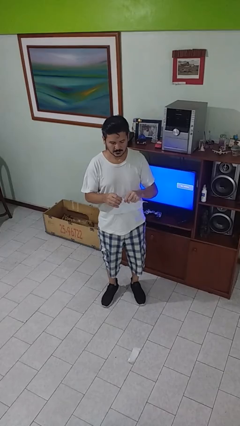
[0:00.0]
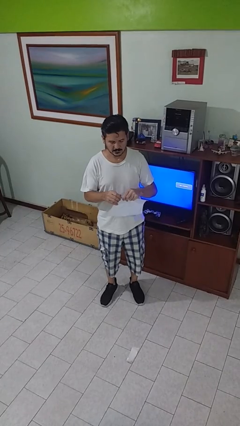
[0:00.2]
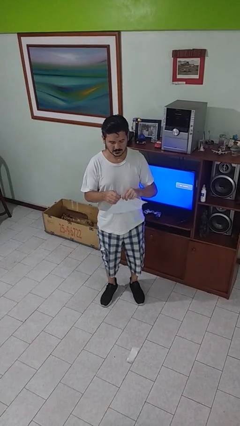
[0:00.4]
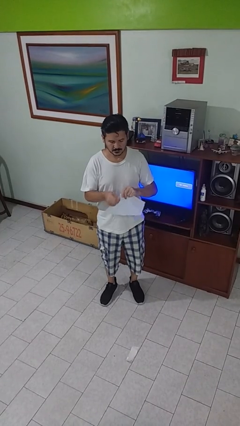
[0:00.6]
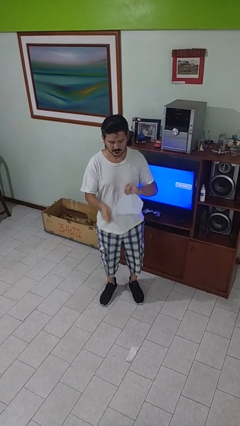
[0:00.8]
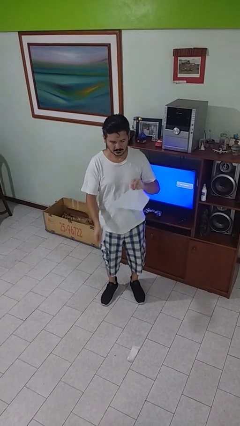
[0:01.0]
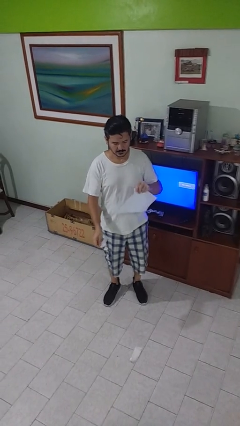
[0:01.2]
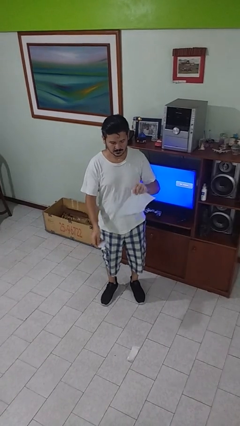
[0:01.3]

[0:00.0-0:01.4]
person tears paper

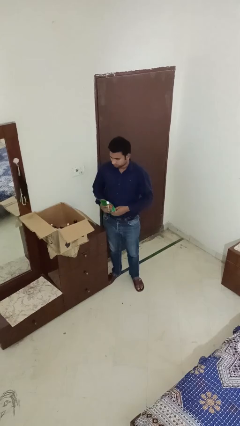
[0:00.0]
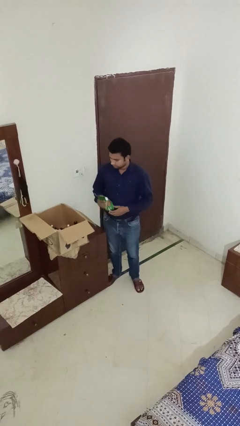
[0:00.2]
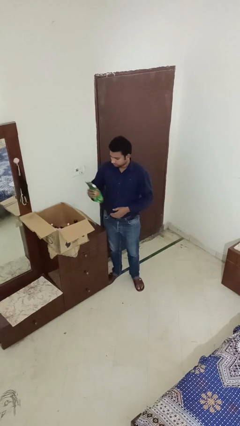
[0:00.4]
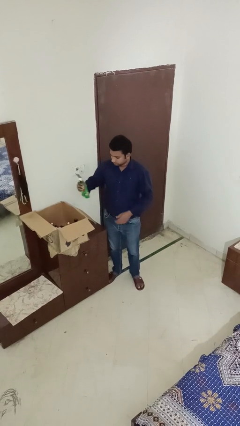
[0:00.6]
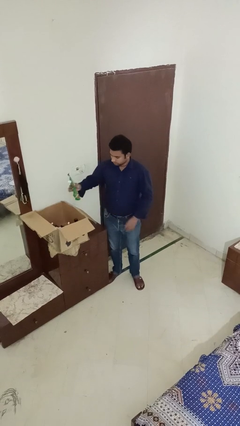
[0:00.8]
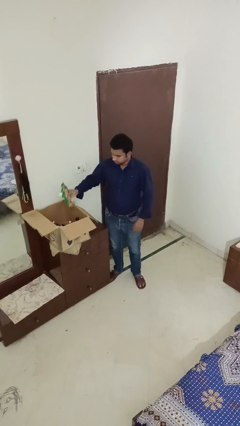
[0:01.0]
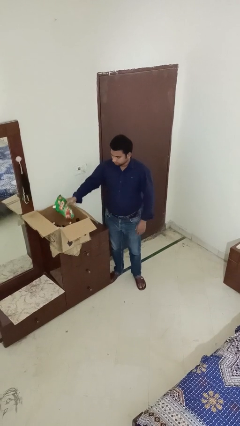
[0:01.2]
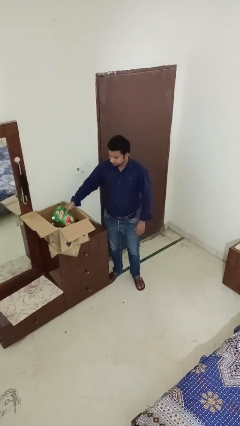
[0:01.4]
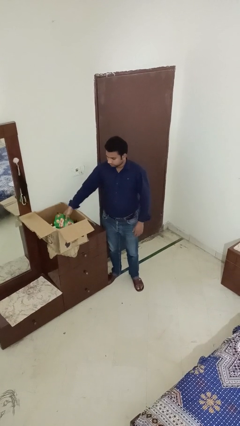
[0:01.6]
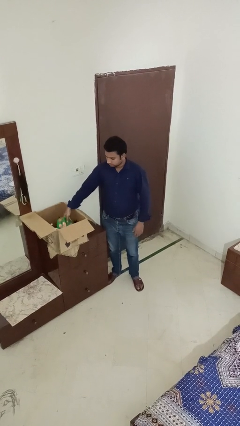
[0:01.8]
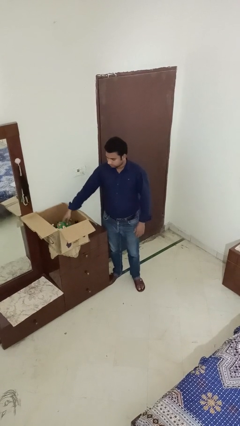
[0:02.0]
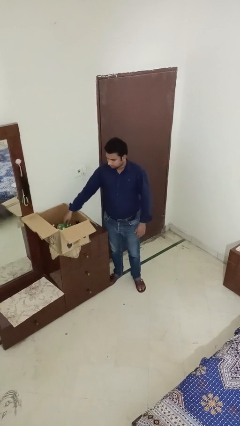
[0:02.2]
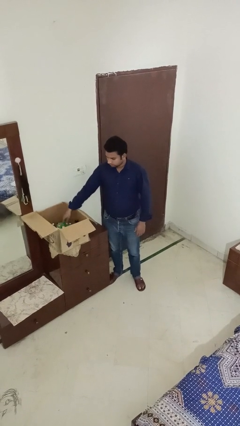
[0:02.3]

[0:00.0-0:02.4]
person puts object into box

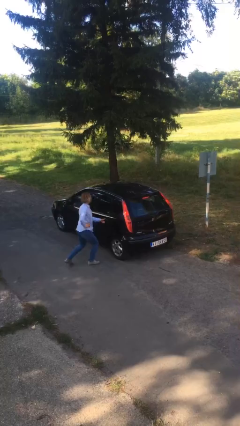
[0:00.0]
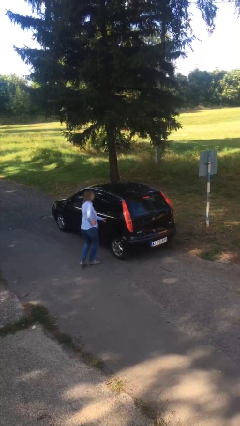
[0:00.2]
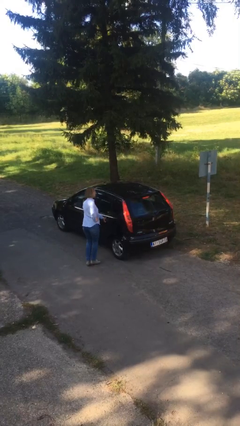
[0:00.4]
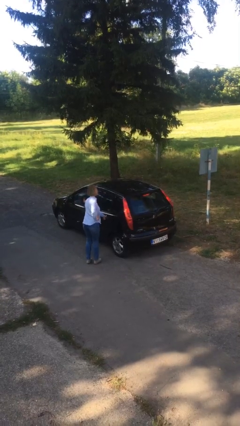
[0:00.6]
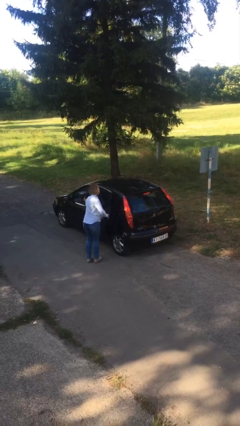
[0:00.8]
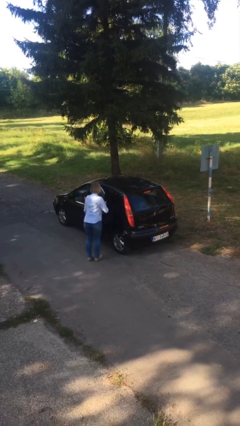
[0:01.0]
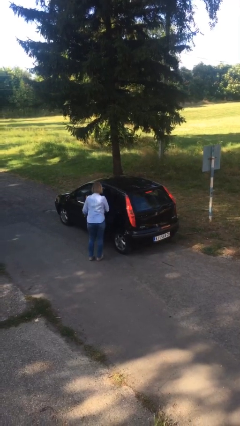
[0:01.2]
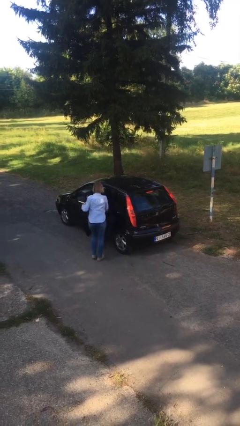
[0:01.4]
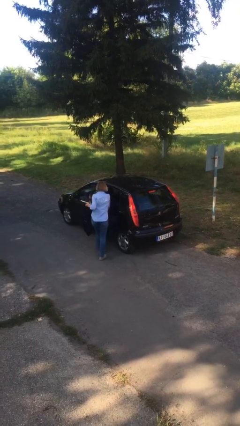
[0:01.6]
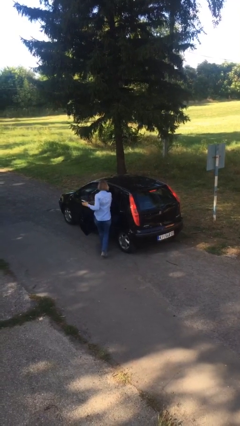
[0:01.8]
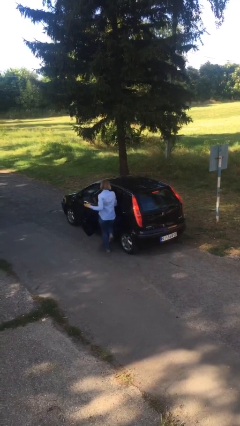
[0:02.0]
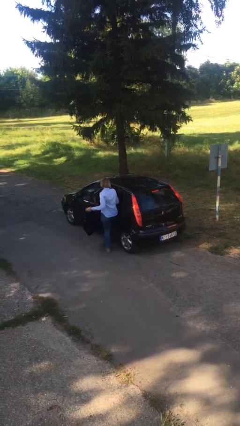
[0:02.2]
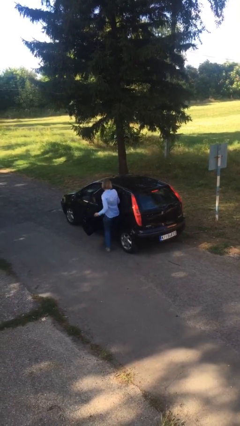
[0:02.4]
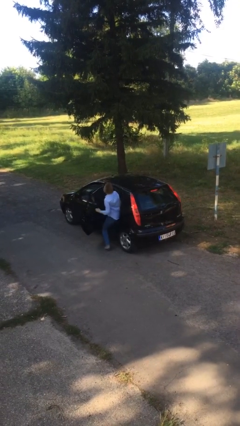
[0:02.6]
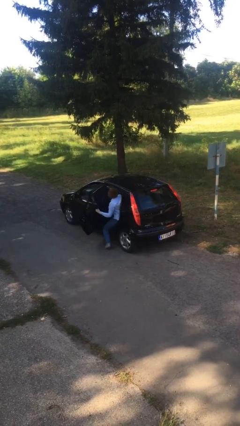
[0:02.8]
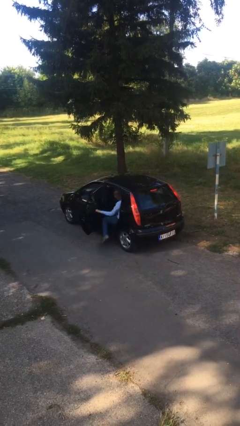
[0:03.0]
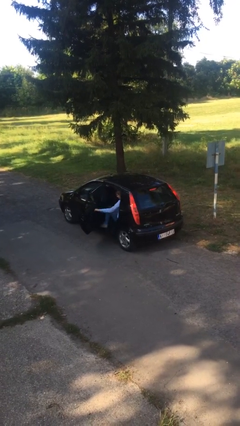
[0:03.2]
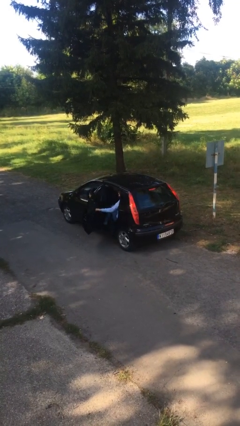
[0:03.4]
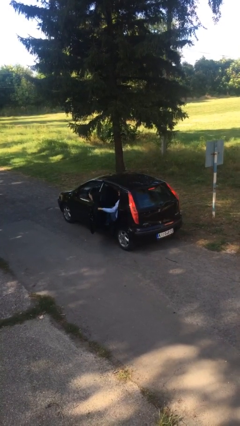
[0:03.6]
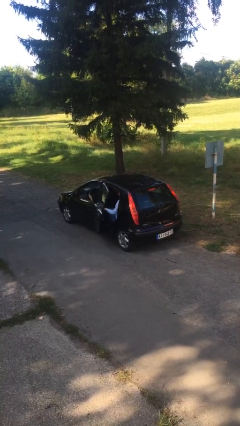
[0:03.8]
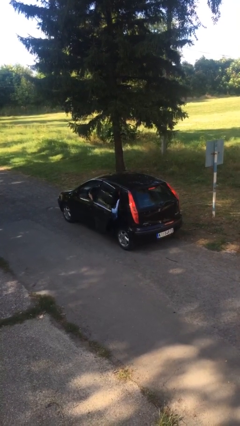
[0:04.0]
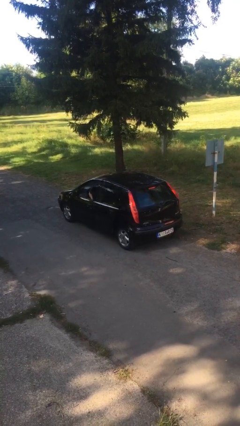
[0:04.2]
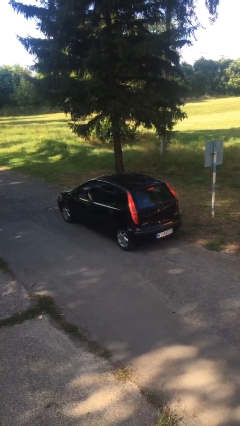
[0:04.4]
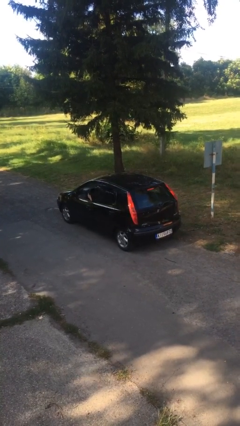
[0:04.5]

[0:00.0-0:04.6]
car picks up person

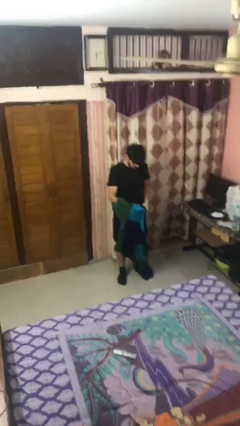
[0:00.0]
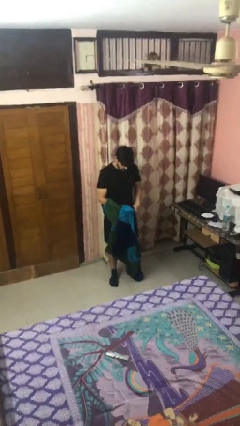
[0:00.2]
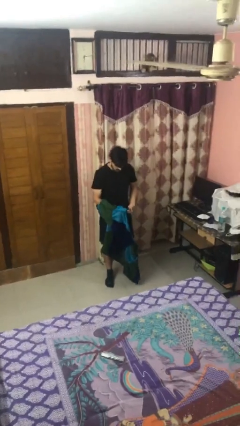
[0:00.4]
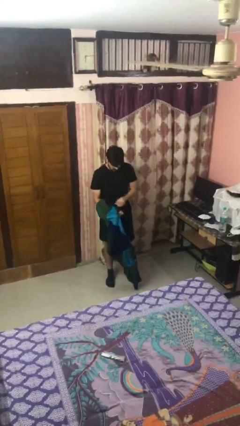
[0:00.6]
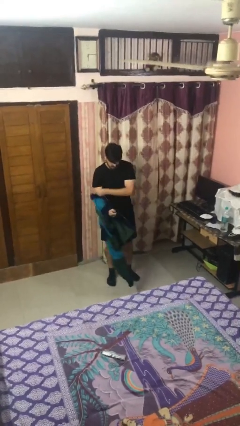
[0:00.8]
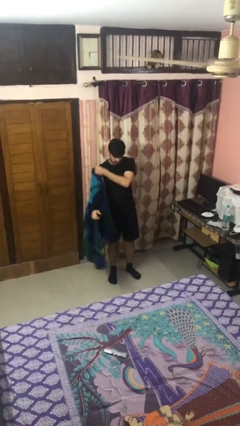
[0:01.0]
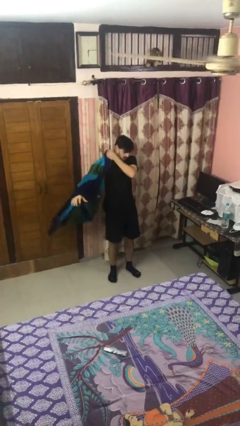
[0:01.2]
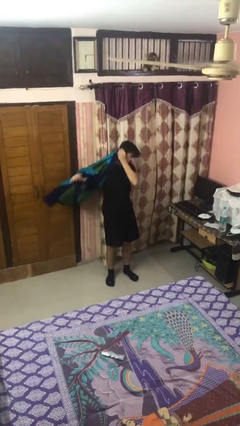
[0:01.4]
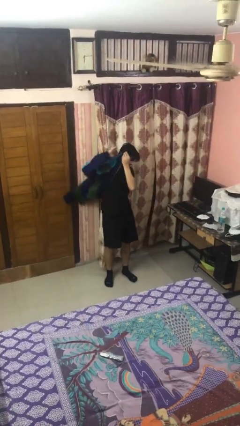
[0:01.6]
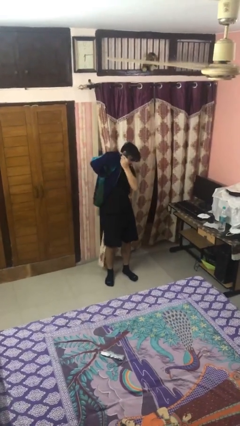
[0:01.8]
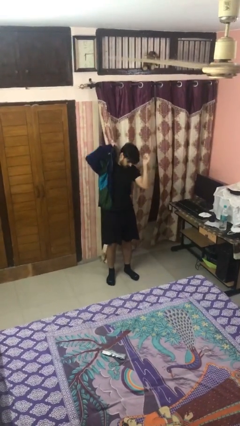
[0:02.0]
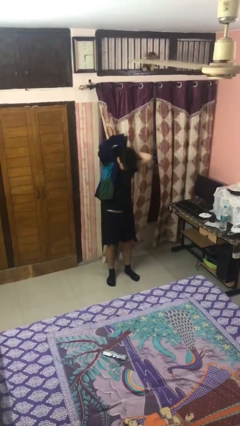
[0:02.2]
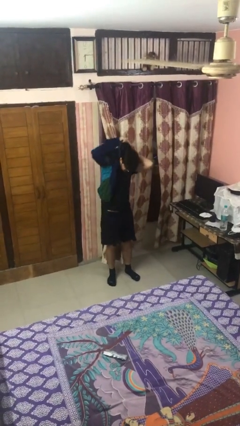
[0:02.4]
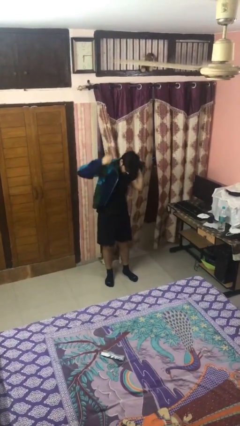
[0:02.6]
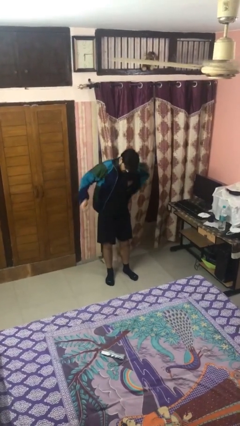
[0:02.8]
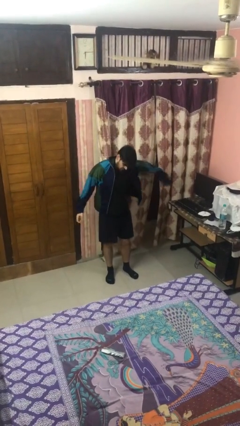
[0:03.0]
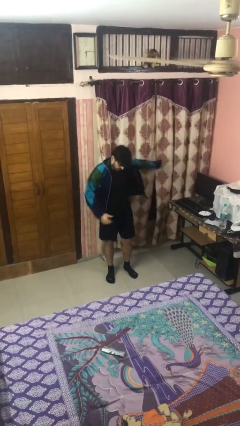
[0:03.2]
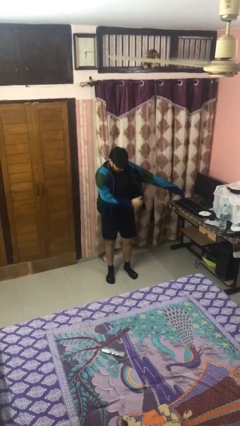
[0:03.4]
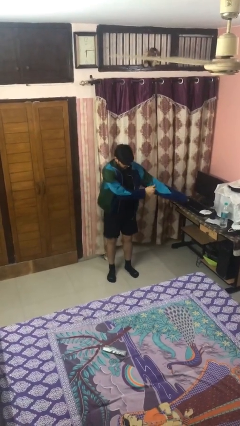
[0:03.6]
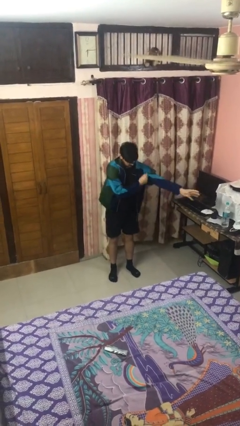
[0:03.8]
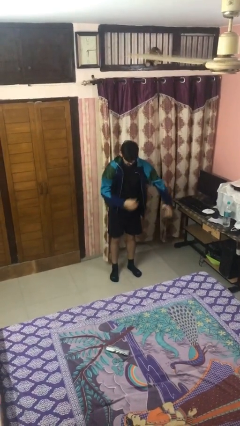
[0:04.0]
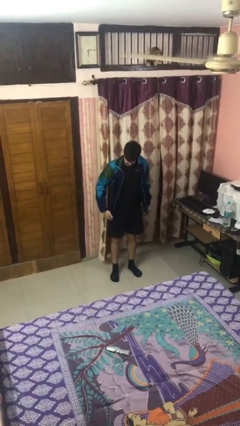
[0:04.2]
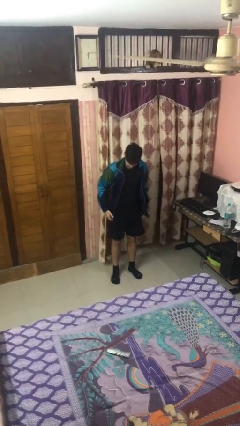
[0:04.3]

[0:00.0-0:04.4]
person puts on jacket

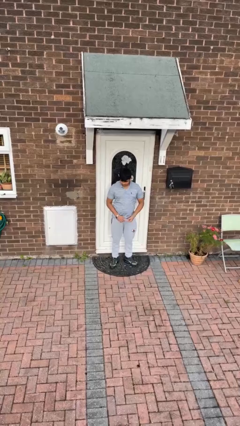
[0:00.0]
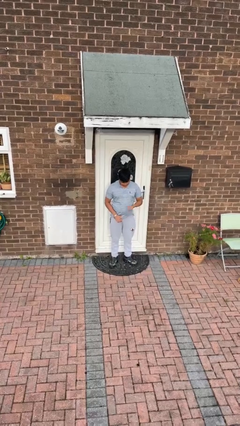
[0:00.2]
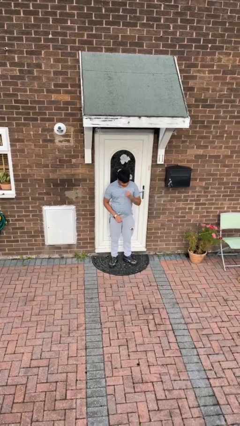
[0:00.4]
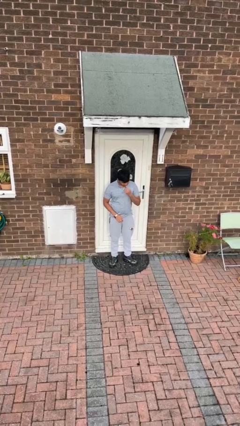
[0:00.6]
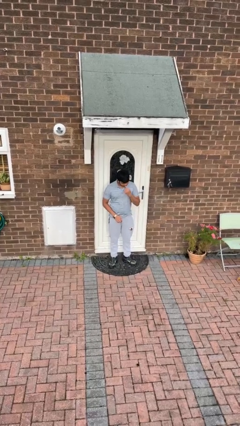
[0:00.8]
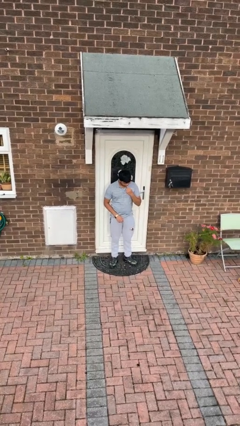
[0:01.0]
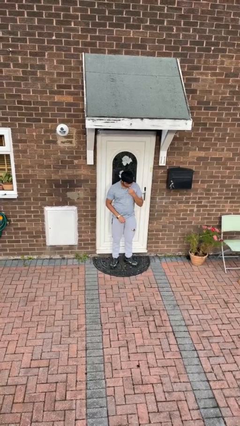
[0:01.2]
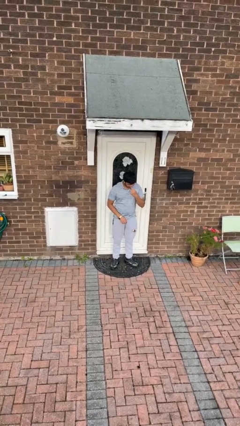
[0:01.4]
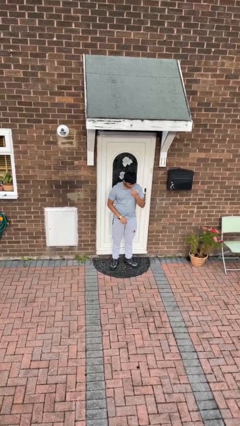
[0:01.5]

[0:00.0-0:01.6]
person flosses

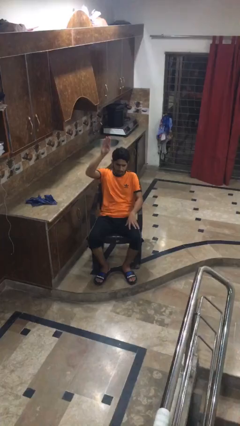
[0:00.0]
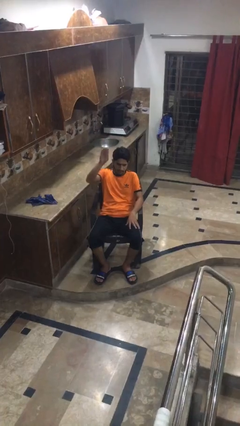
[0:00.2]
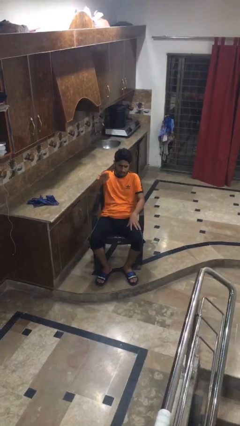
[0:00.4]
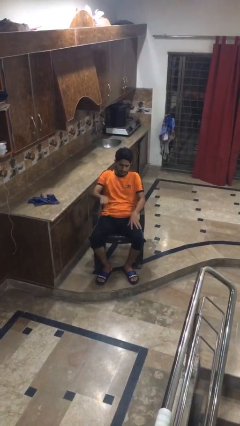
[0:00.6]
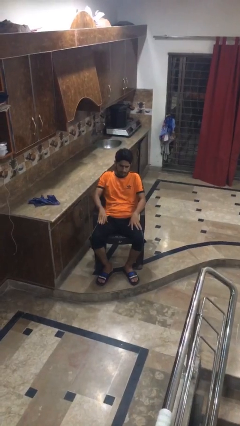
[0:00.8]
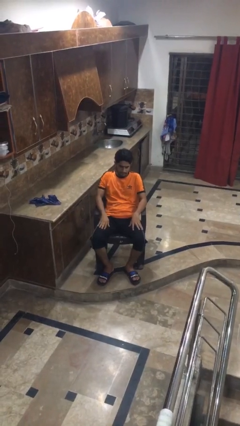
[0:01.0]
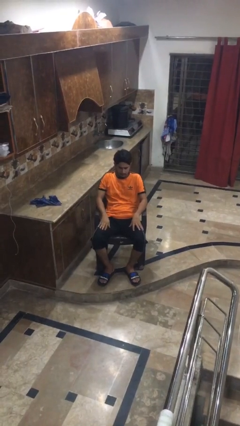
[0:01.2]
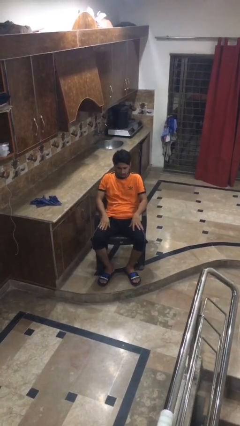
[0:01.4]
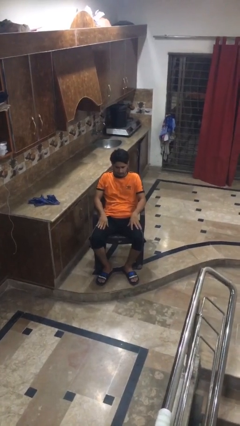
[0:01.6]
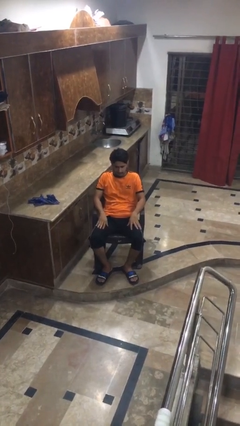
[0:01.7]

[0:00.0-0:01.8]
person gestures lower hand

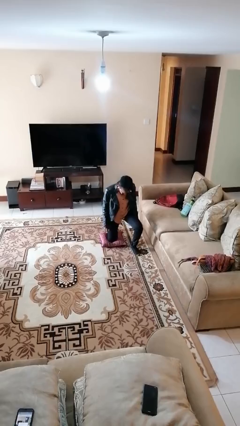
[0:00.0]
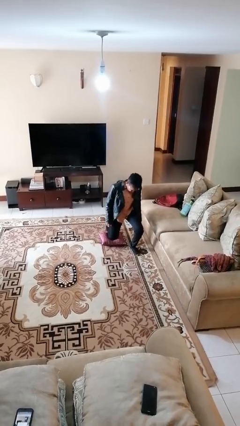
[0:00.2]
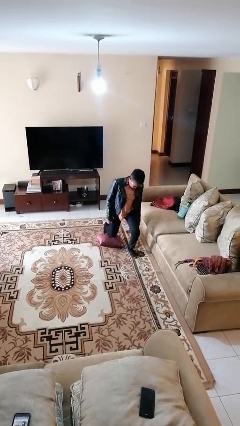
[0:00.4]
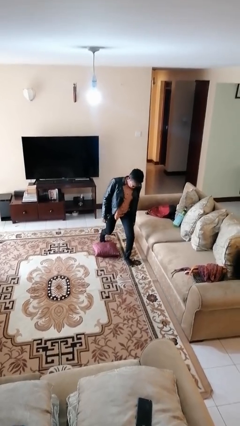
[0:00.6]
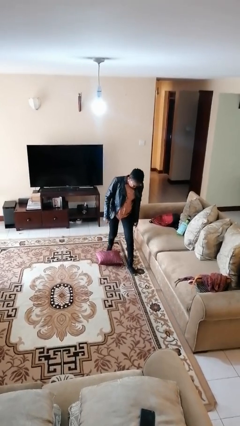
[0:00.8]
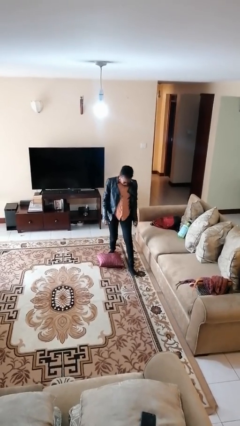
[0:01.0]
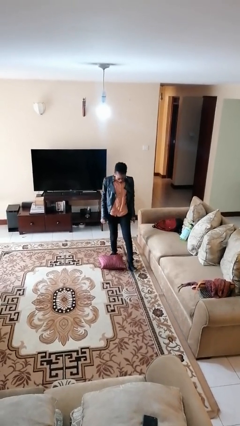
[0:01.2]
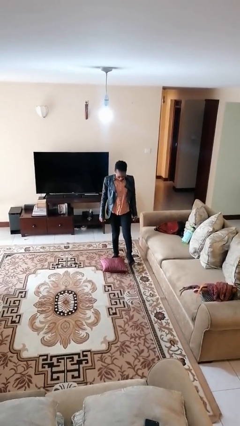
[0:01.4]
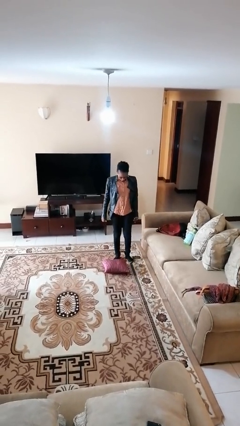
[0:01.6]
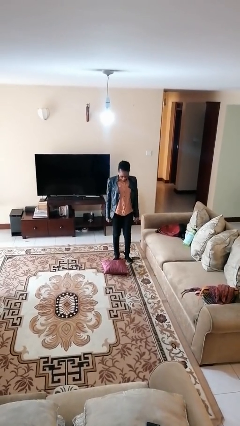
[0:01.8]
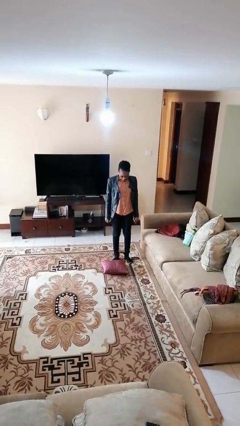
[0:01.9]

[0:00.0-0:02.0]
person stands up from floor
